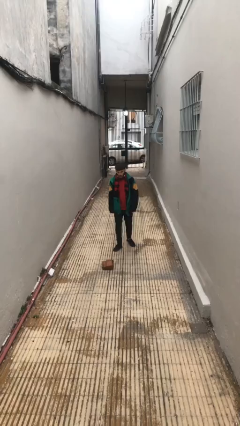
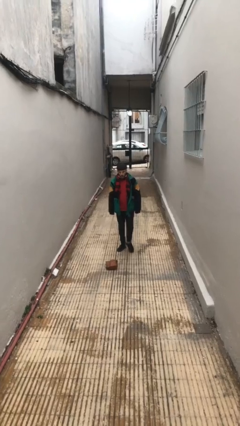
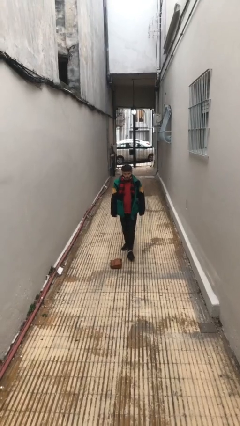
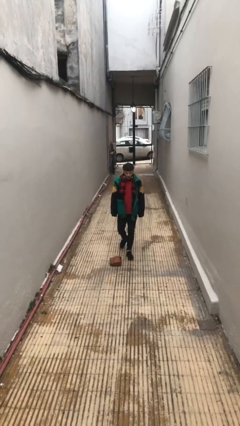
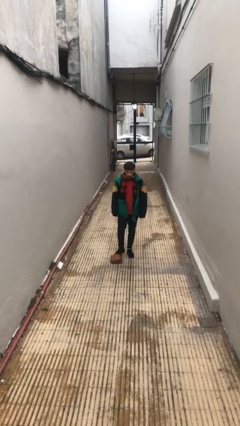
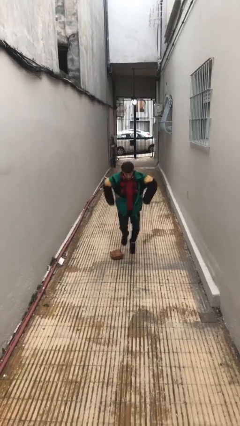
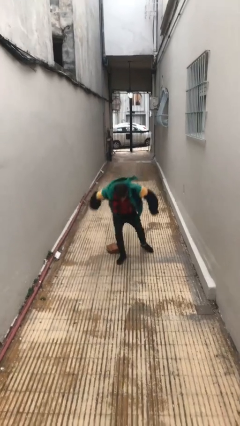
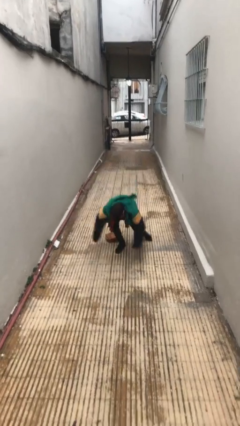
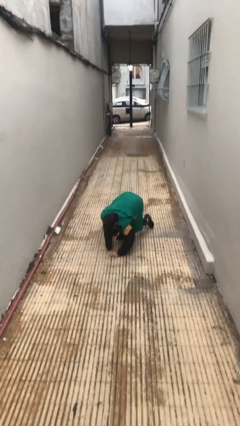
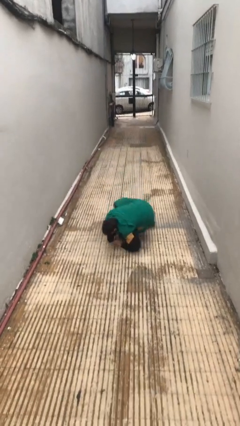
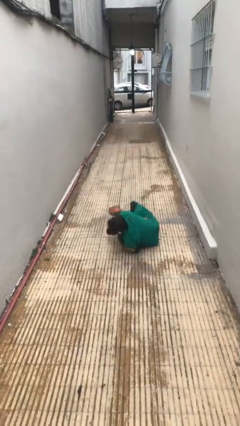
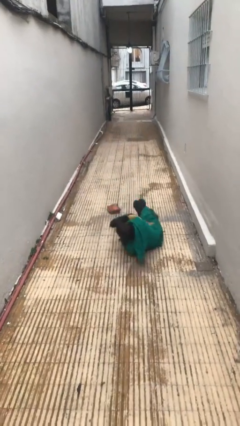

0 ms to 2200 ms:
person trips on object on floor

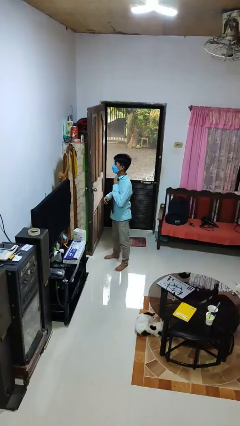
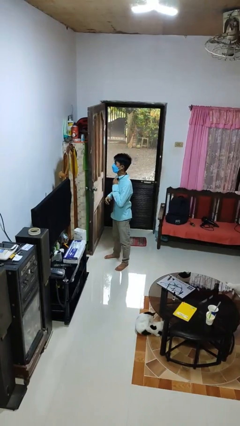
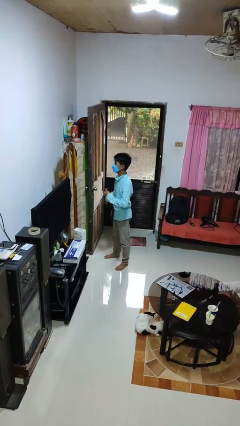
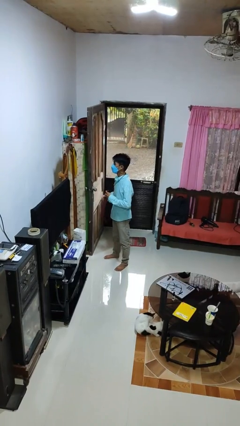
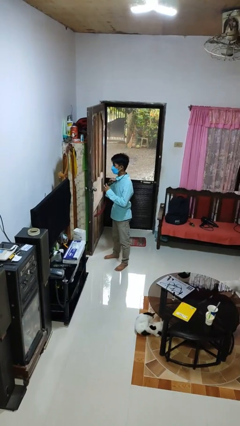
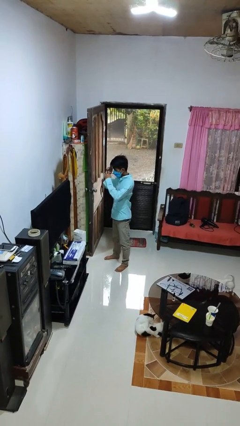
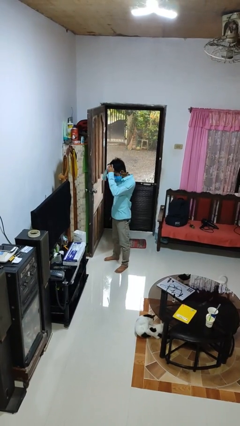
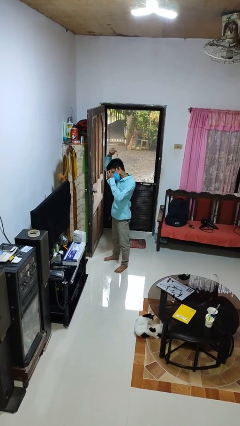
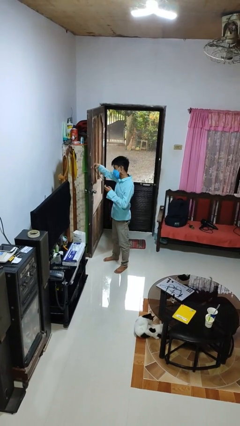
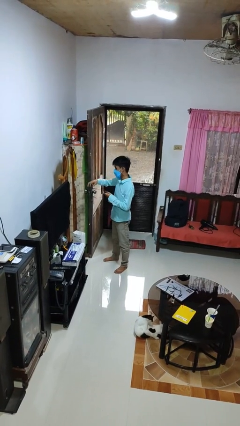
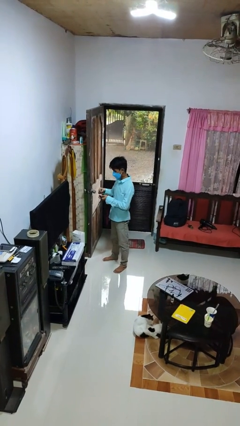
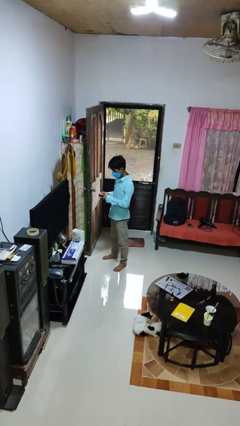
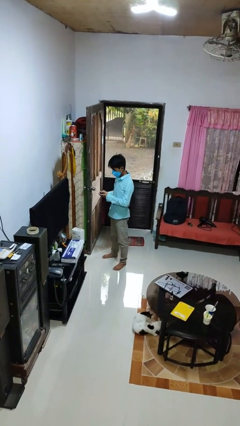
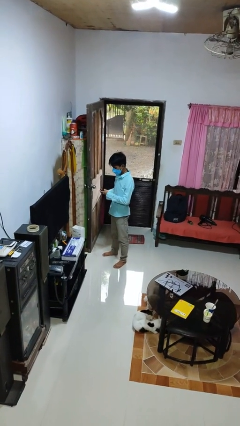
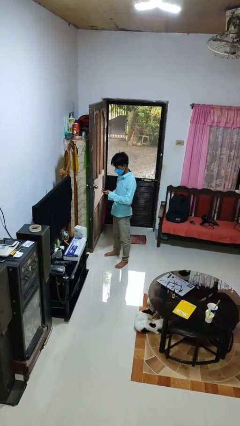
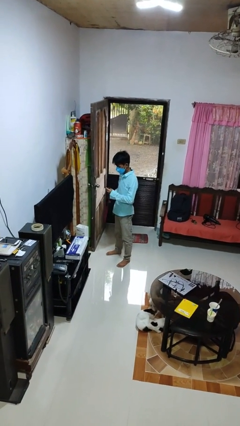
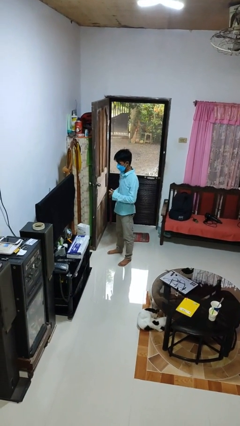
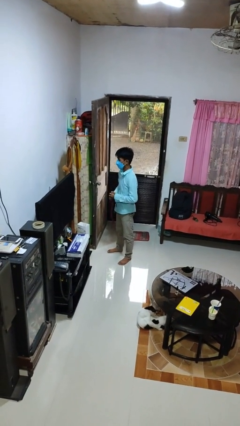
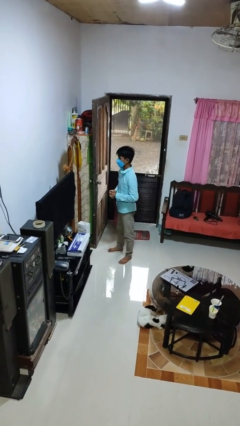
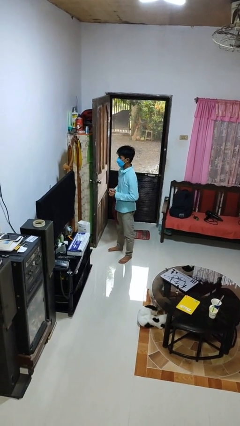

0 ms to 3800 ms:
person takes off necktie

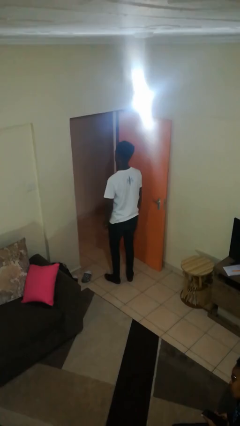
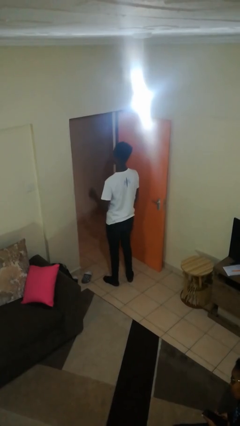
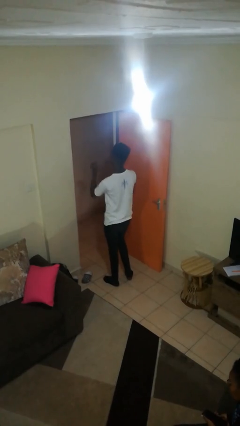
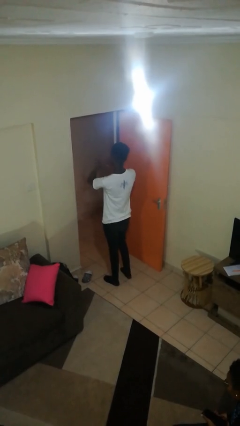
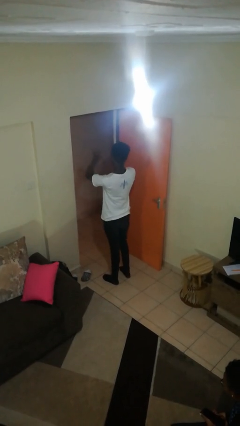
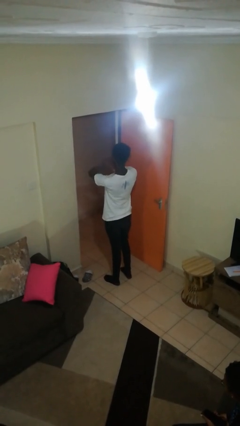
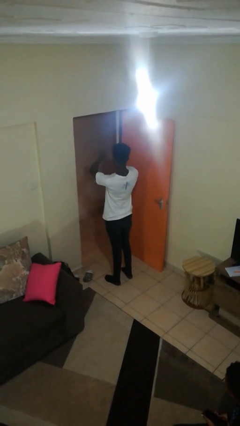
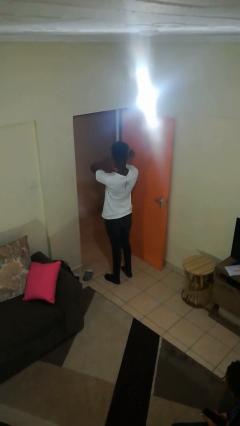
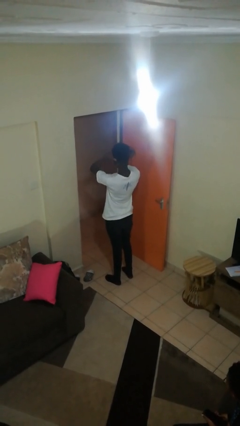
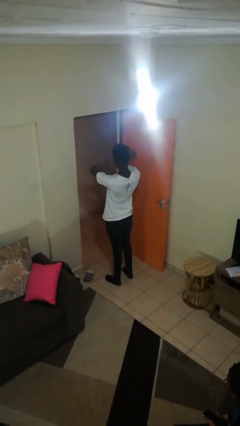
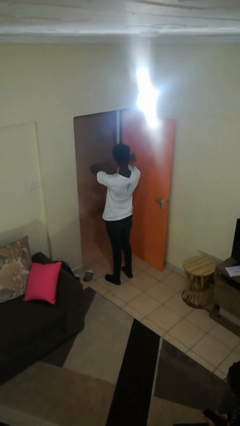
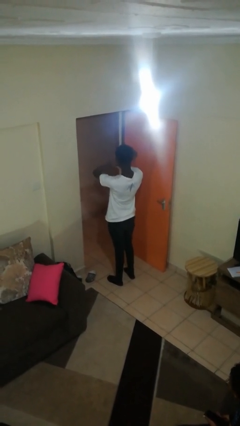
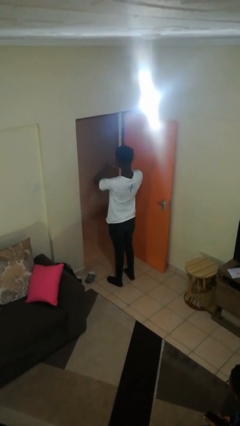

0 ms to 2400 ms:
person gestures behind me

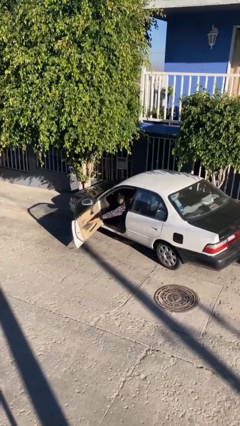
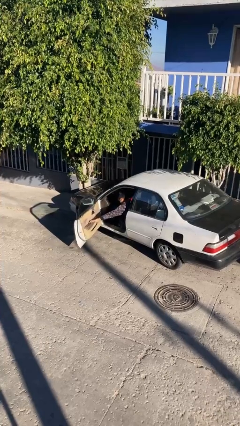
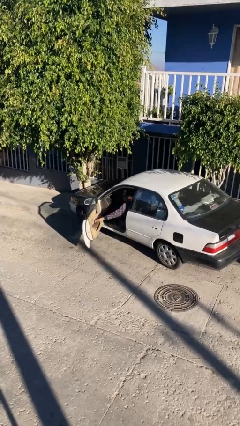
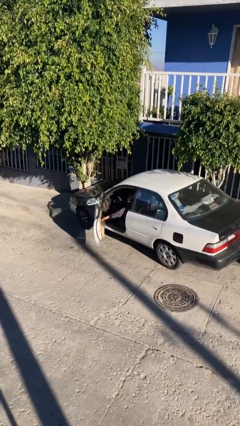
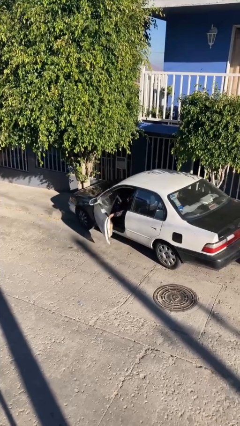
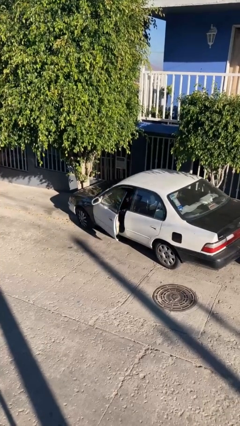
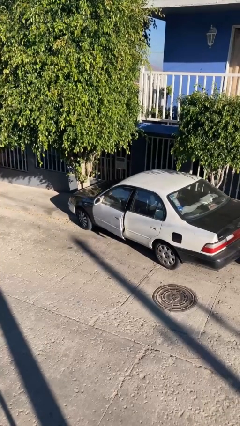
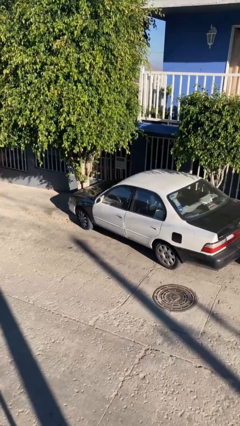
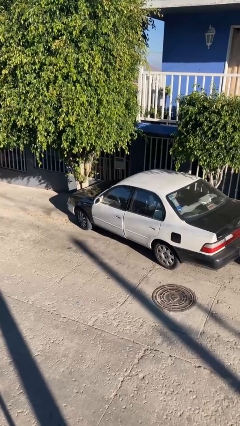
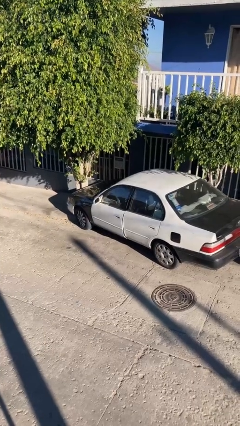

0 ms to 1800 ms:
person closes car door

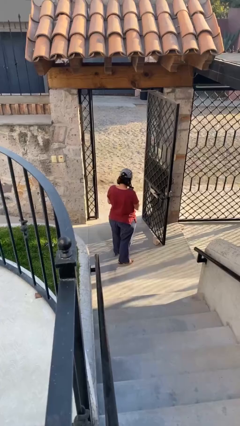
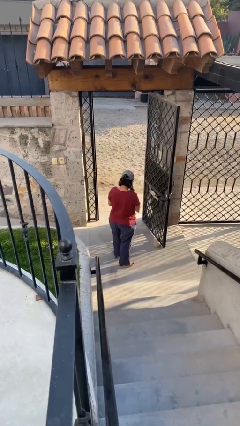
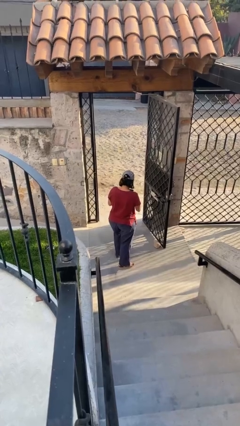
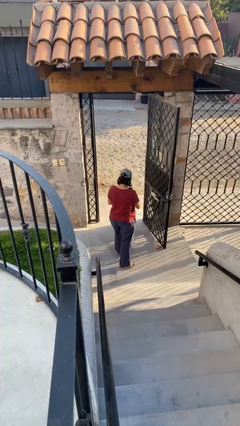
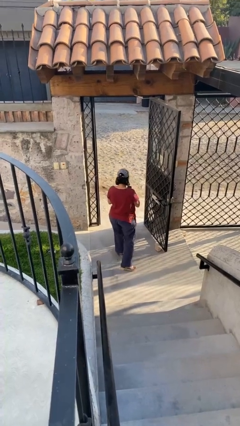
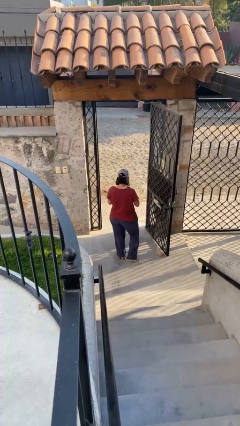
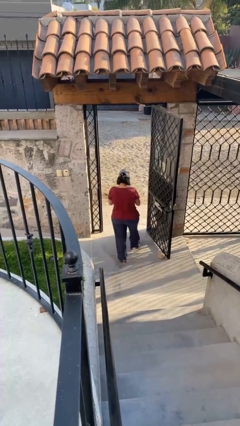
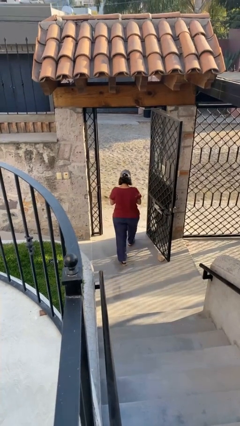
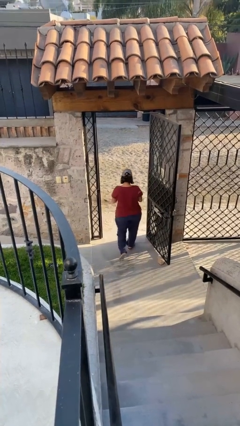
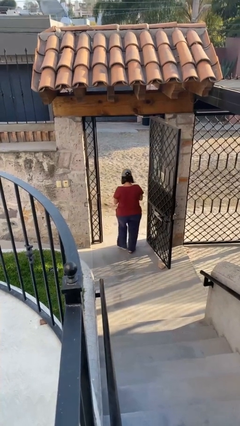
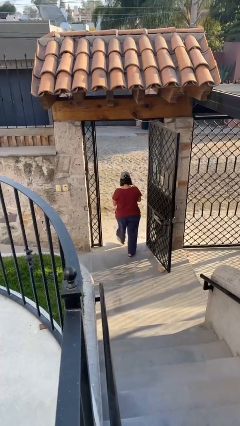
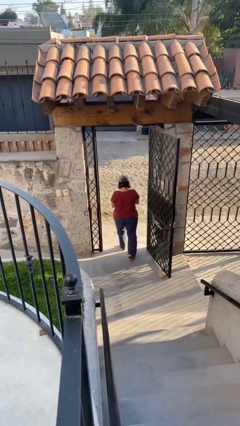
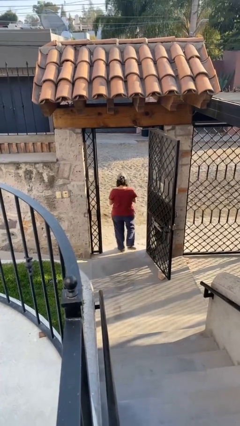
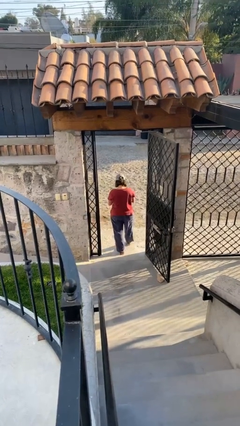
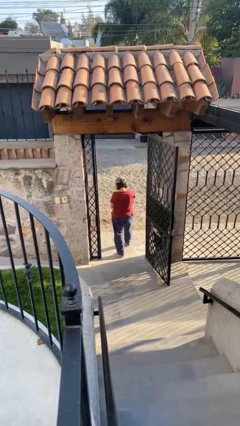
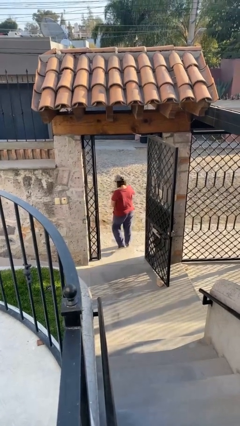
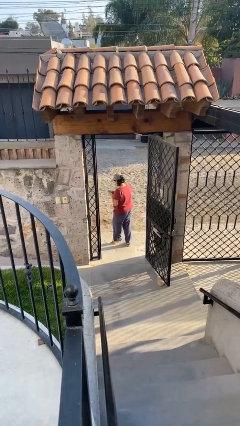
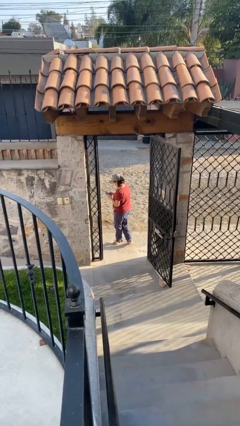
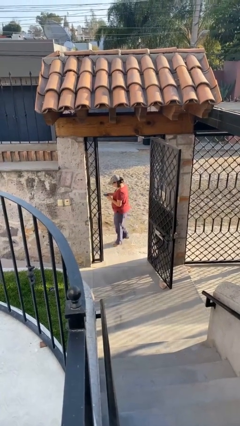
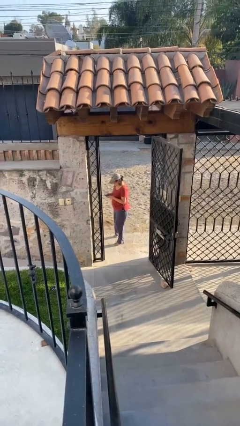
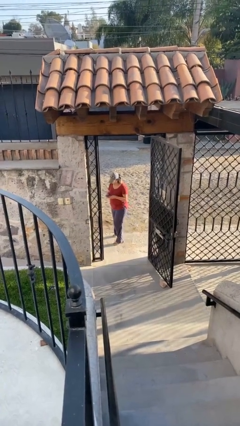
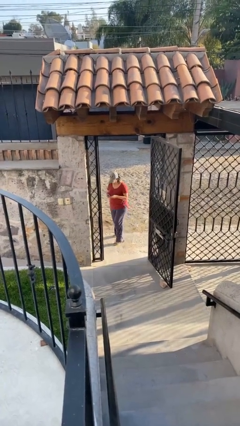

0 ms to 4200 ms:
person exits scene through structure

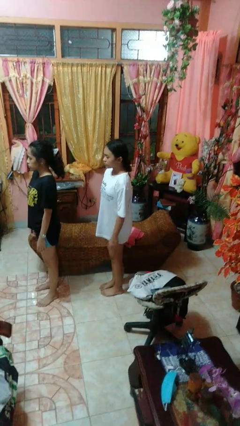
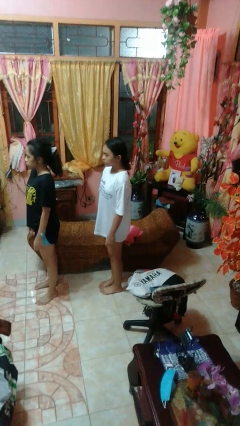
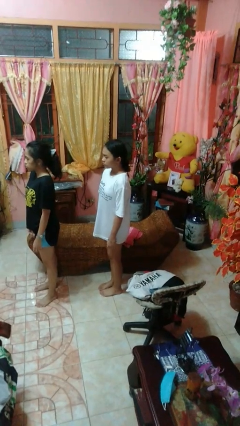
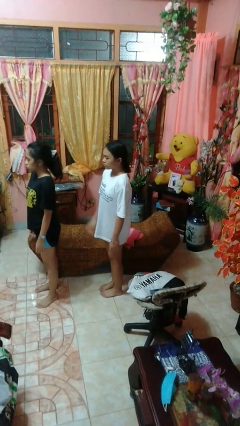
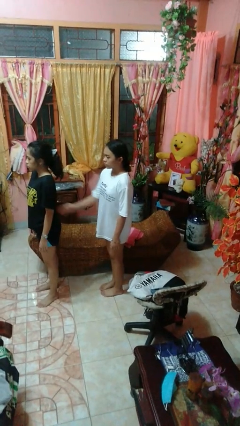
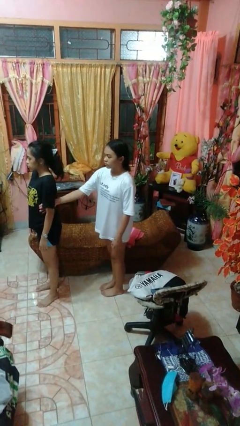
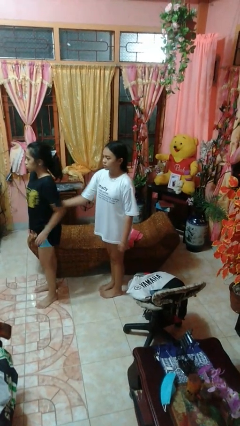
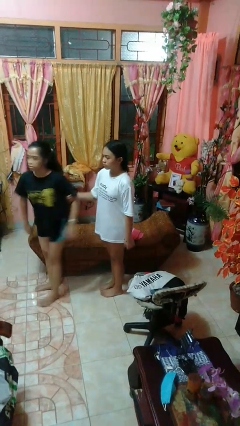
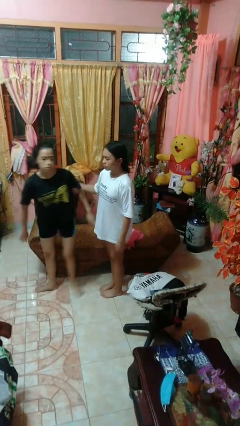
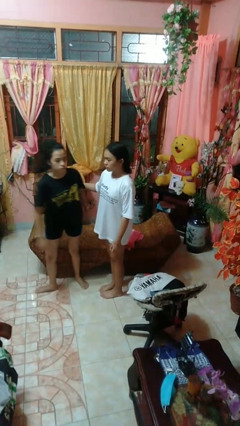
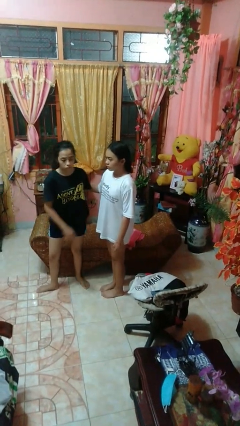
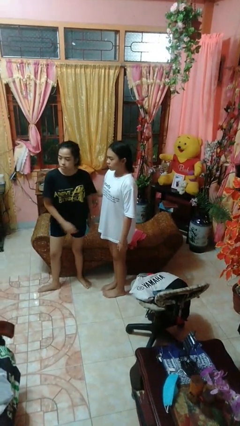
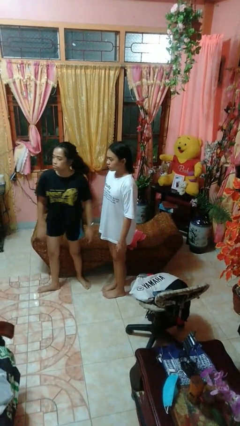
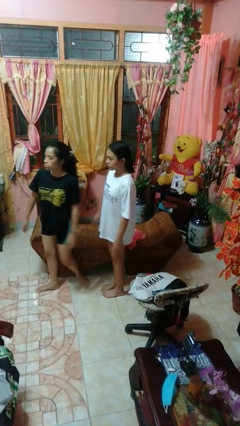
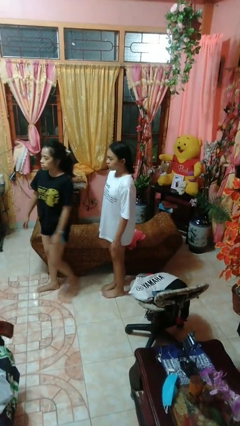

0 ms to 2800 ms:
person grabs person by bicep
